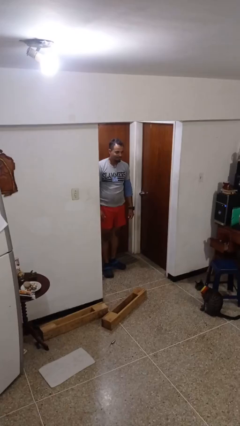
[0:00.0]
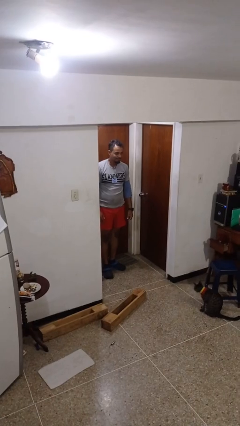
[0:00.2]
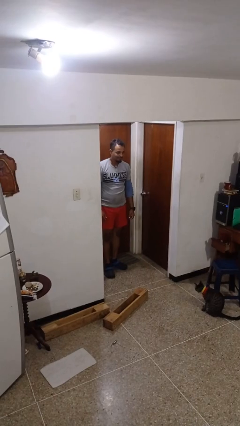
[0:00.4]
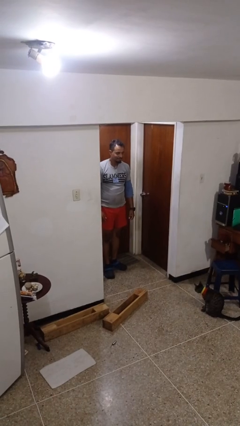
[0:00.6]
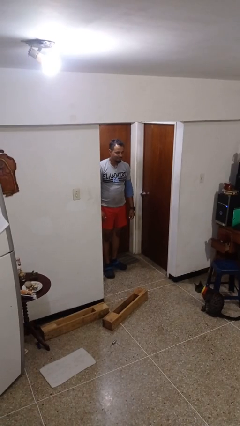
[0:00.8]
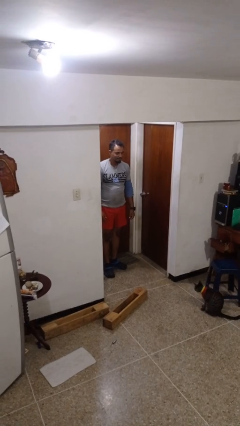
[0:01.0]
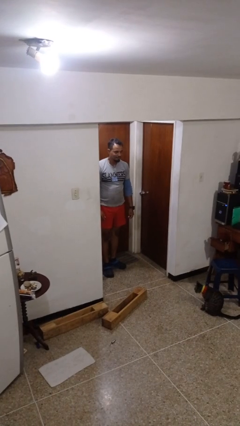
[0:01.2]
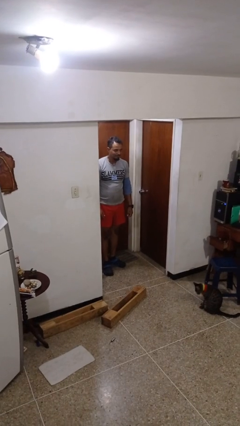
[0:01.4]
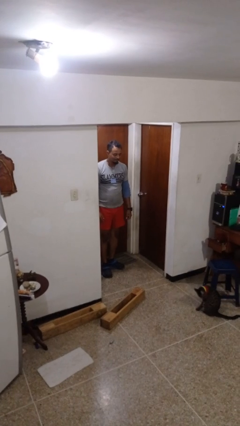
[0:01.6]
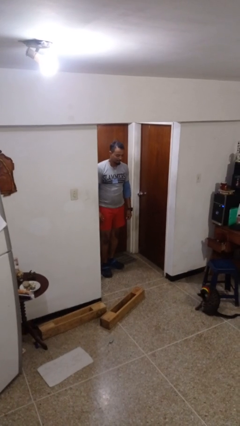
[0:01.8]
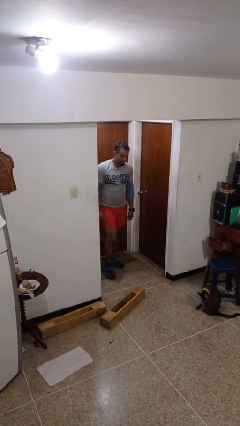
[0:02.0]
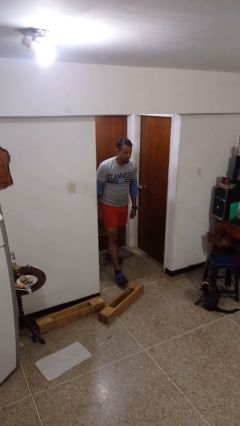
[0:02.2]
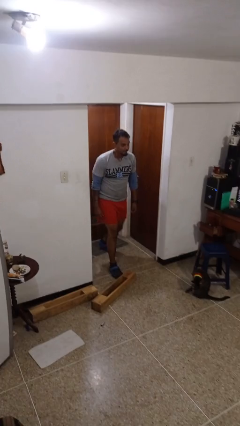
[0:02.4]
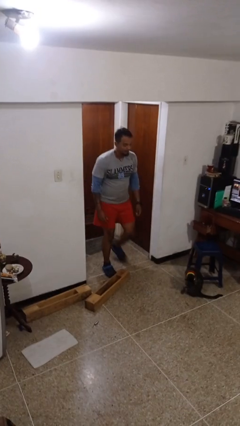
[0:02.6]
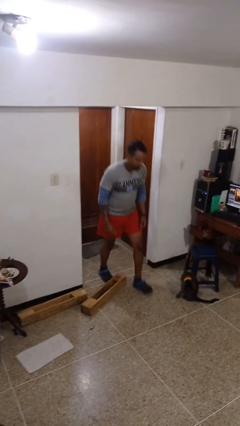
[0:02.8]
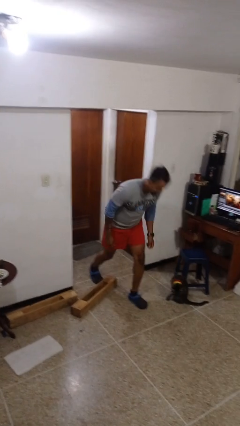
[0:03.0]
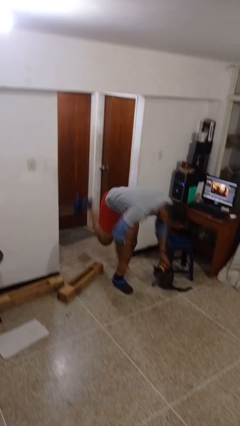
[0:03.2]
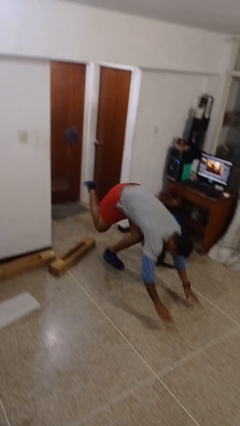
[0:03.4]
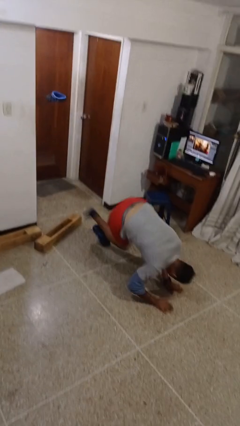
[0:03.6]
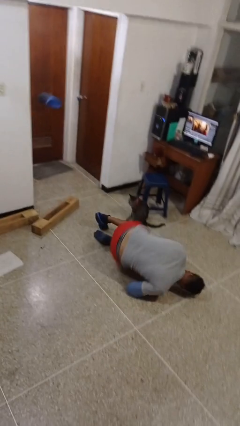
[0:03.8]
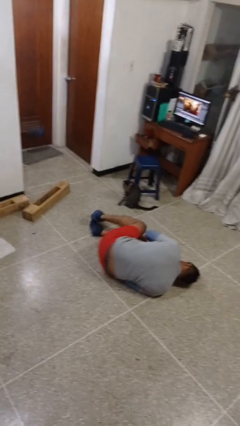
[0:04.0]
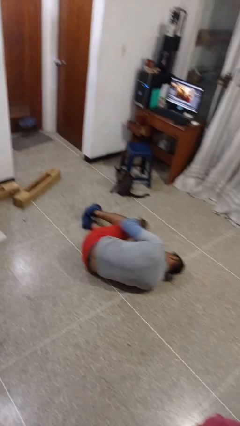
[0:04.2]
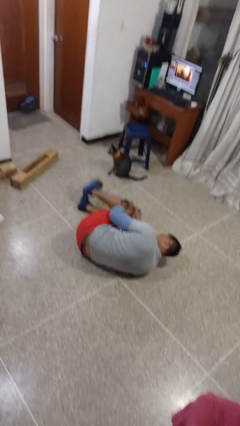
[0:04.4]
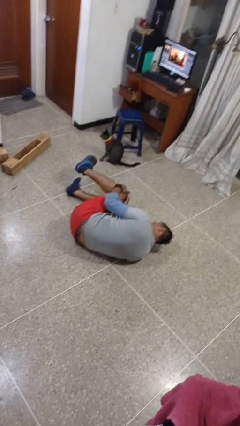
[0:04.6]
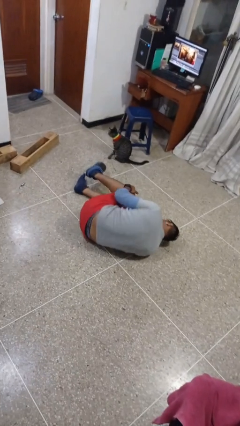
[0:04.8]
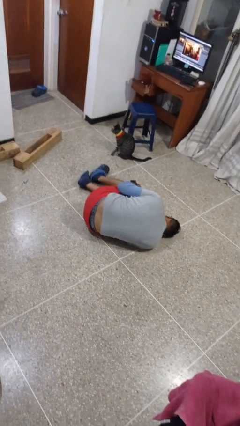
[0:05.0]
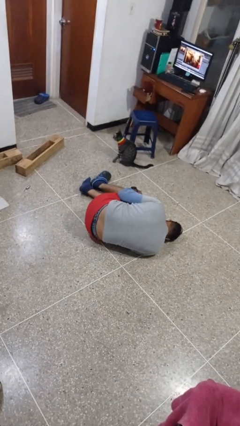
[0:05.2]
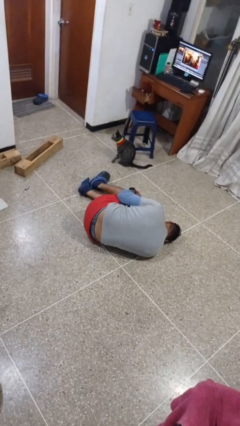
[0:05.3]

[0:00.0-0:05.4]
person trips on object on floor

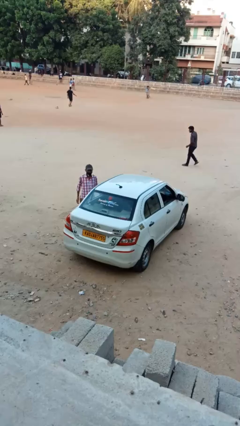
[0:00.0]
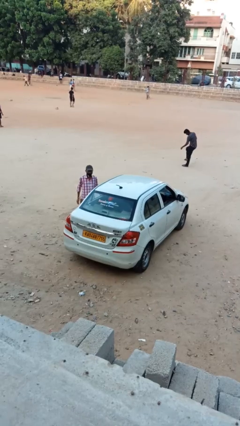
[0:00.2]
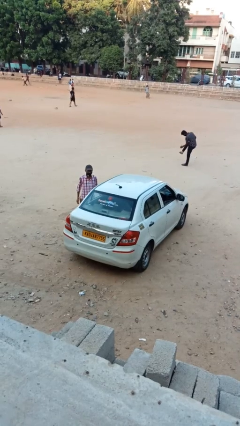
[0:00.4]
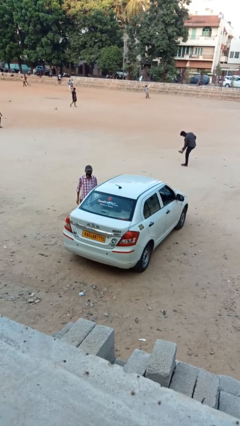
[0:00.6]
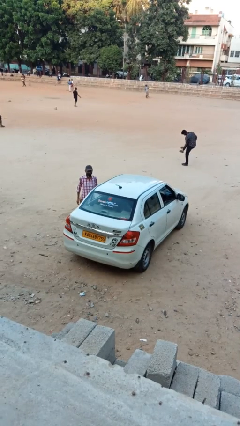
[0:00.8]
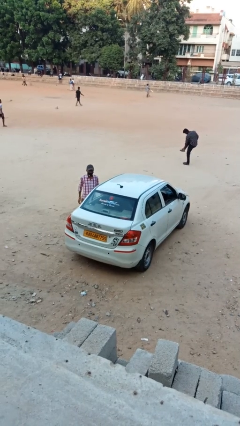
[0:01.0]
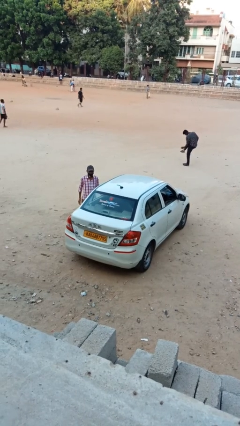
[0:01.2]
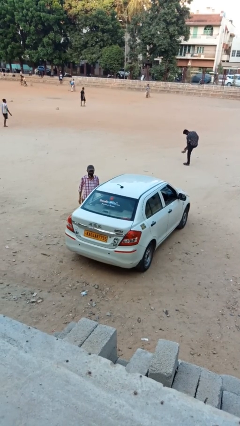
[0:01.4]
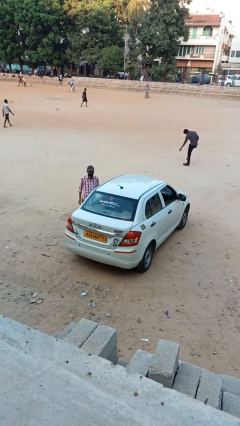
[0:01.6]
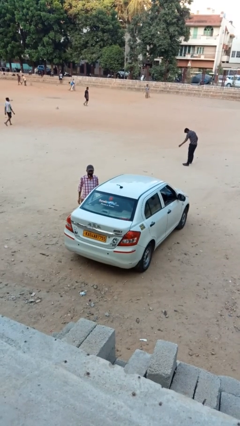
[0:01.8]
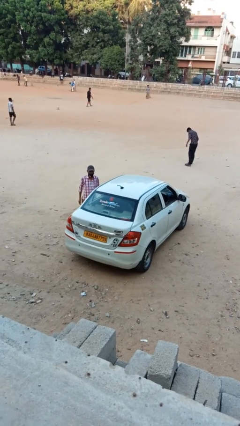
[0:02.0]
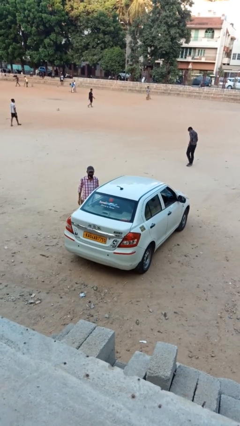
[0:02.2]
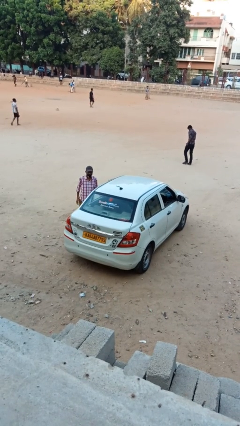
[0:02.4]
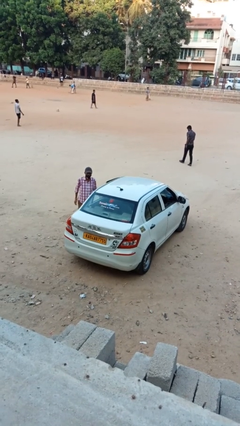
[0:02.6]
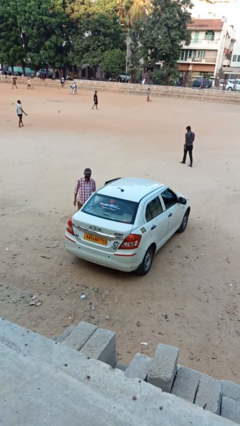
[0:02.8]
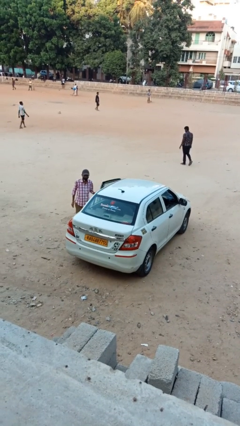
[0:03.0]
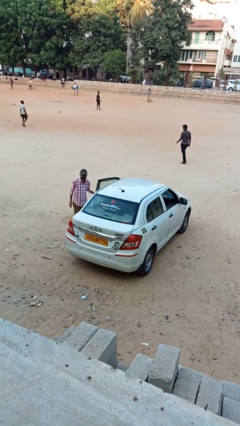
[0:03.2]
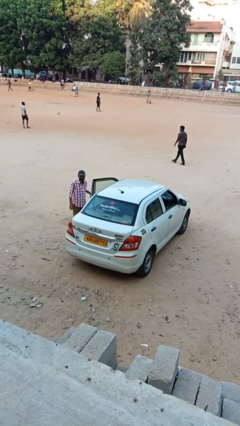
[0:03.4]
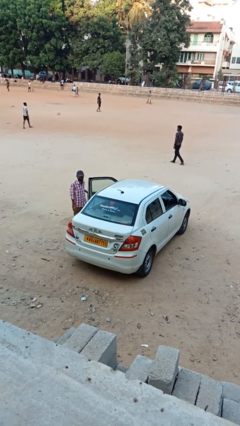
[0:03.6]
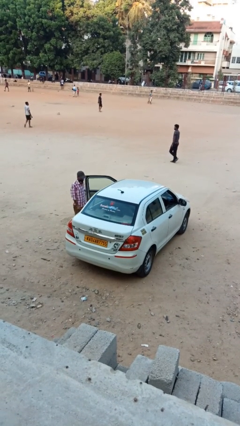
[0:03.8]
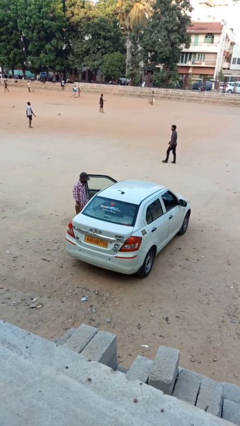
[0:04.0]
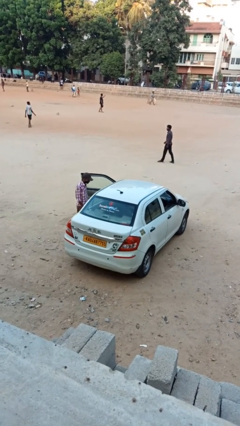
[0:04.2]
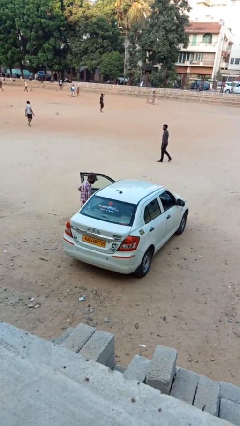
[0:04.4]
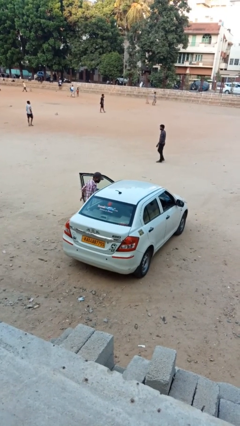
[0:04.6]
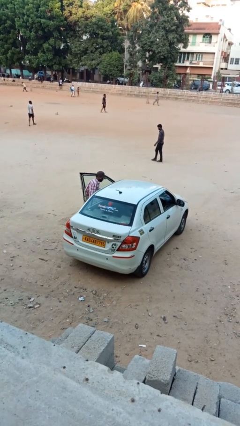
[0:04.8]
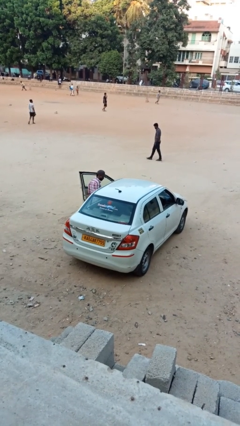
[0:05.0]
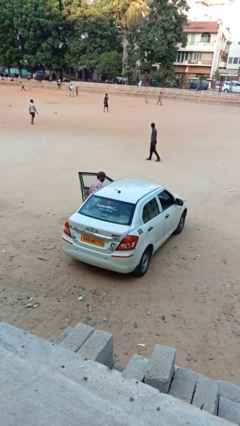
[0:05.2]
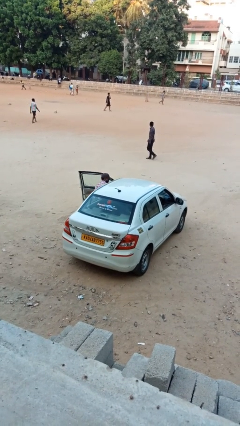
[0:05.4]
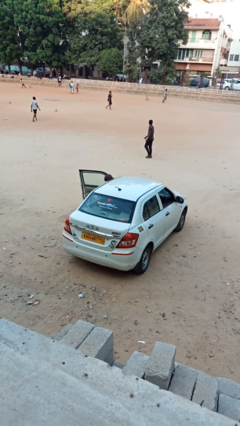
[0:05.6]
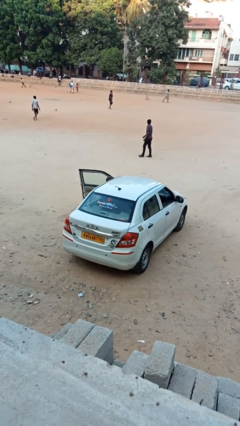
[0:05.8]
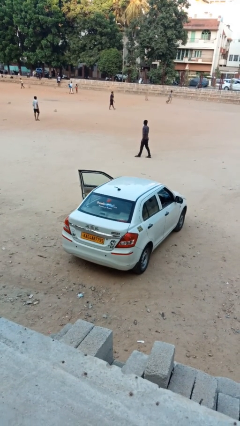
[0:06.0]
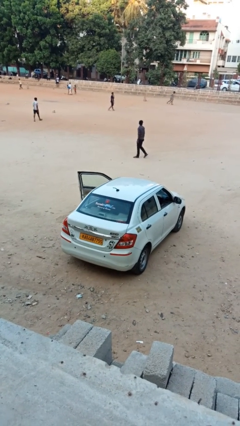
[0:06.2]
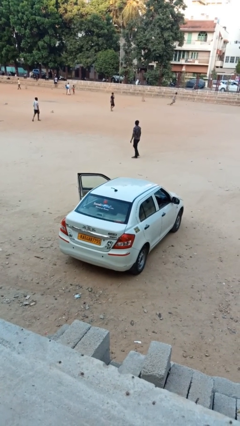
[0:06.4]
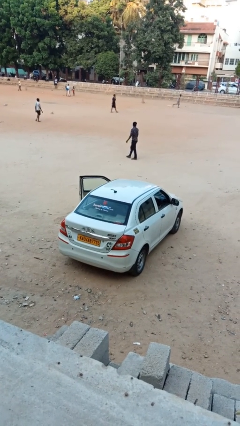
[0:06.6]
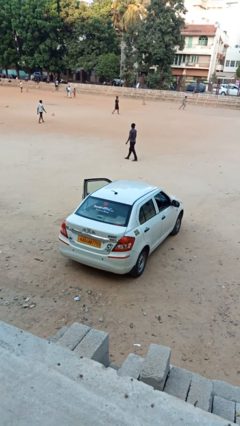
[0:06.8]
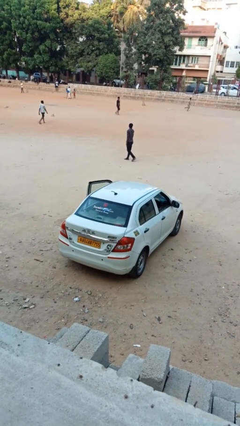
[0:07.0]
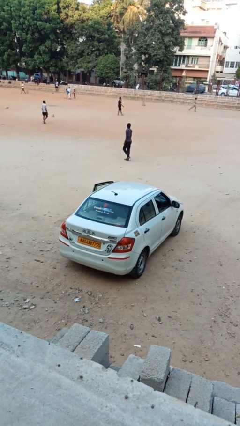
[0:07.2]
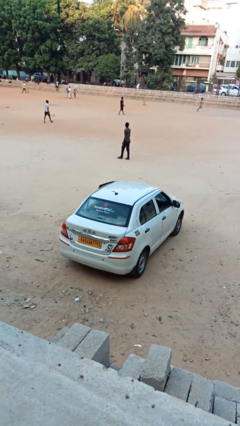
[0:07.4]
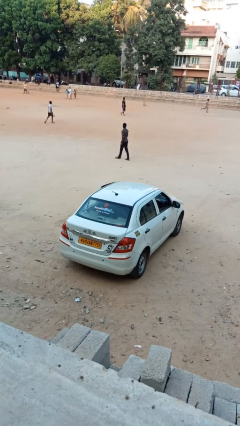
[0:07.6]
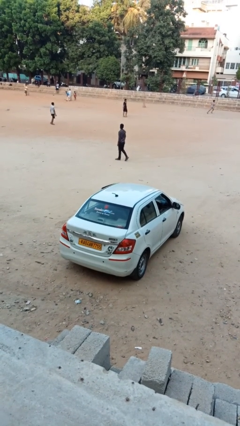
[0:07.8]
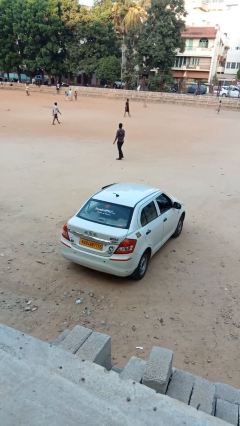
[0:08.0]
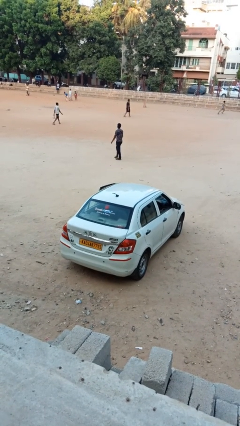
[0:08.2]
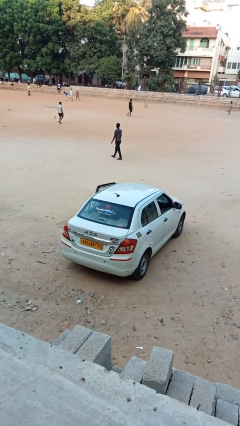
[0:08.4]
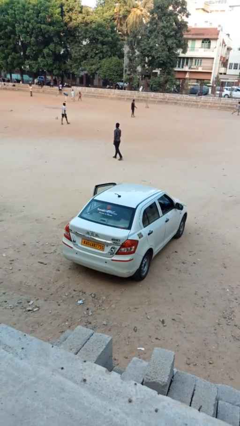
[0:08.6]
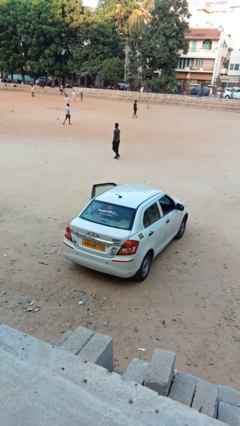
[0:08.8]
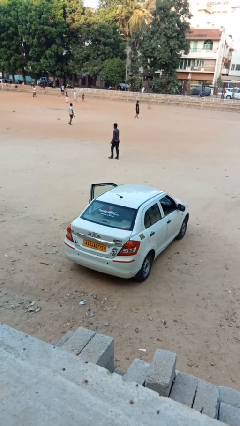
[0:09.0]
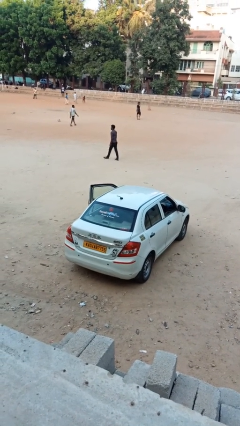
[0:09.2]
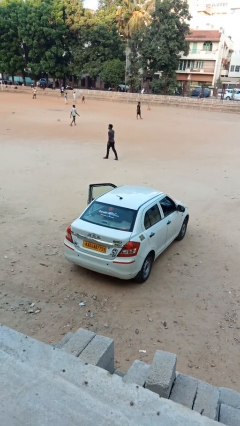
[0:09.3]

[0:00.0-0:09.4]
car picks up person

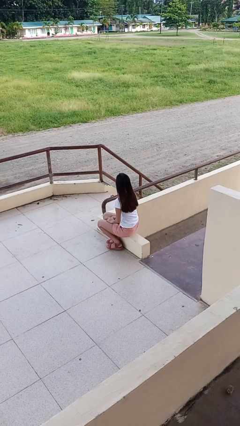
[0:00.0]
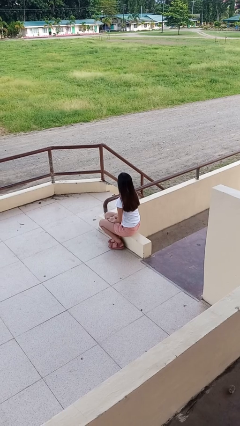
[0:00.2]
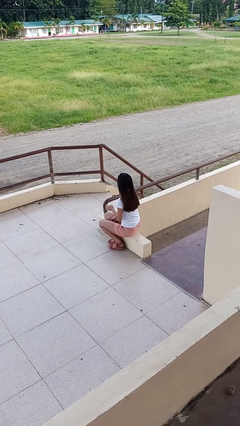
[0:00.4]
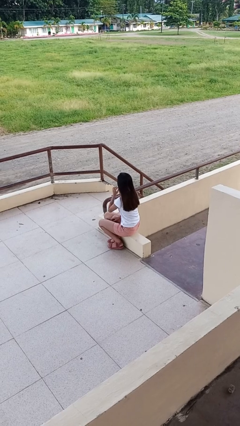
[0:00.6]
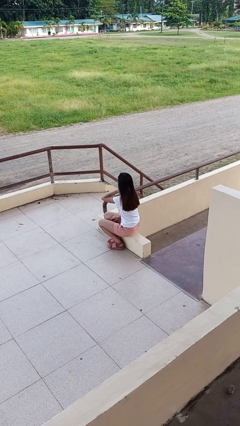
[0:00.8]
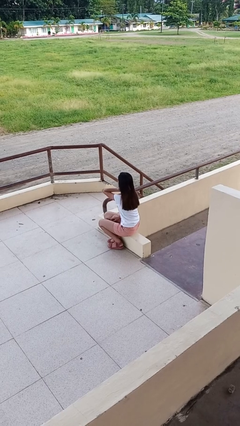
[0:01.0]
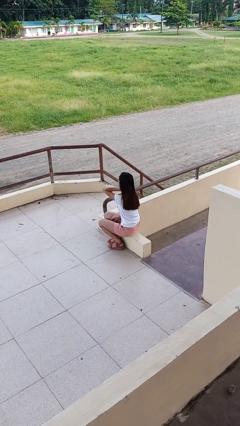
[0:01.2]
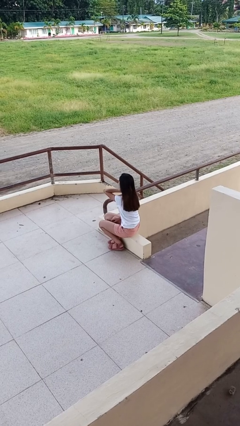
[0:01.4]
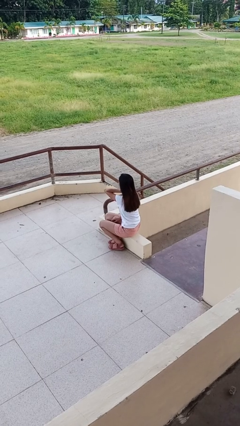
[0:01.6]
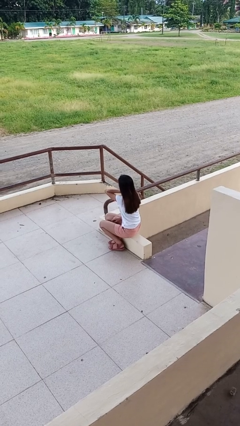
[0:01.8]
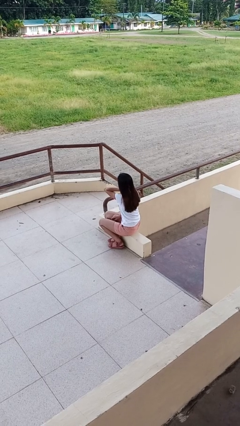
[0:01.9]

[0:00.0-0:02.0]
person rubs neck

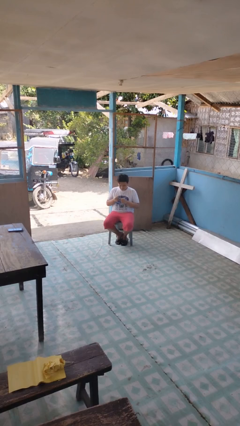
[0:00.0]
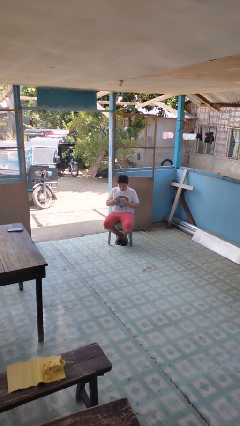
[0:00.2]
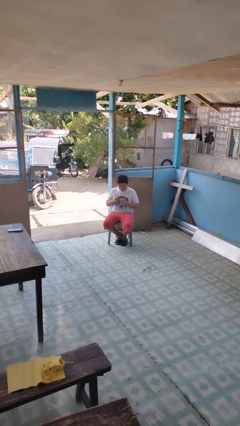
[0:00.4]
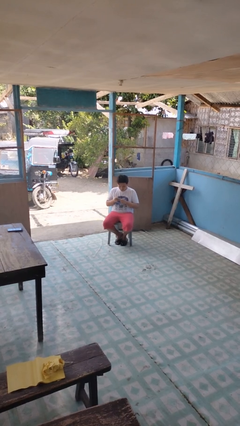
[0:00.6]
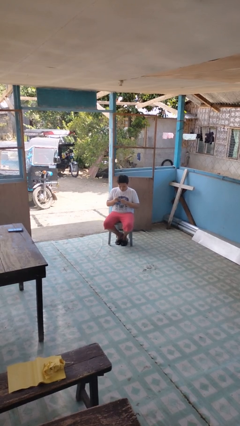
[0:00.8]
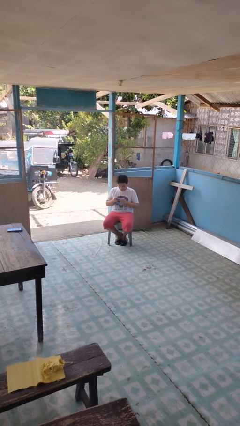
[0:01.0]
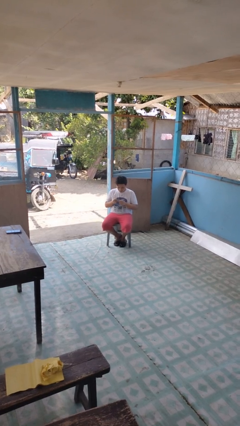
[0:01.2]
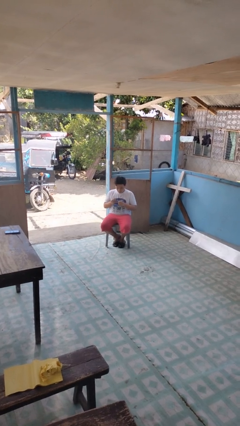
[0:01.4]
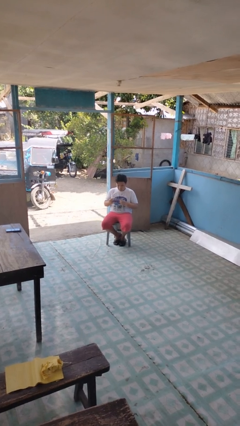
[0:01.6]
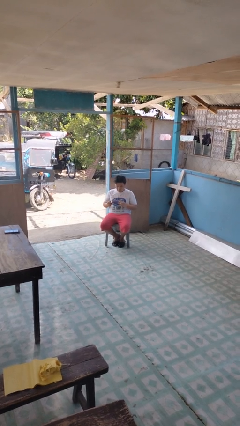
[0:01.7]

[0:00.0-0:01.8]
person clips fingernails
